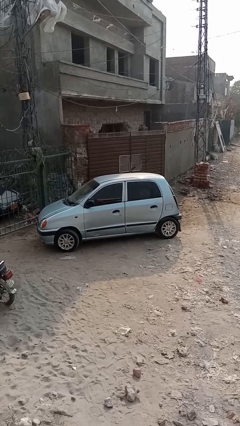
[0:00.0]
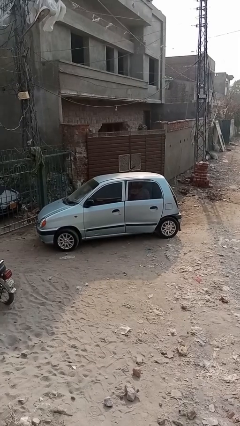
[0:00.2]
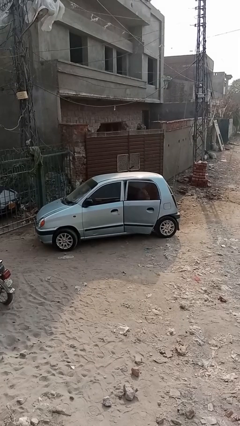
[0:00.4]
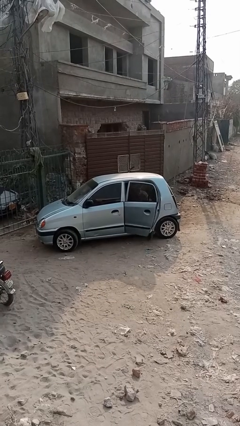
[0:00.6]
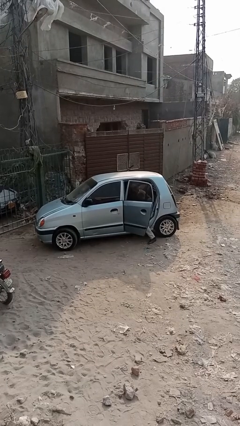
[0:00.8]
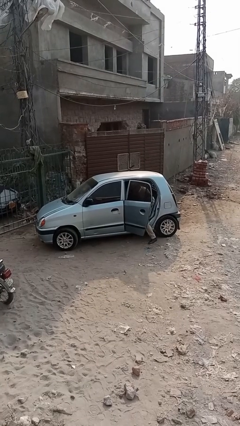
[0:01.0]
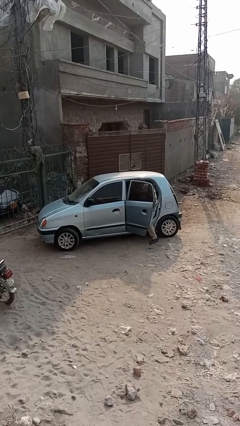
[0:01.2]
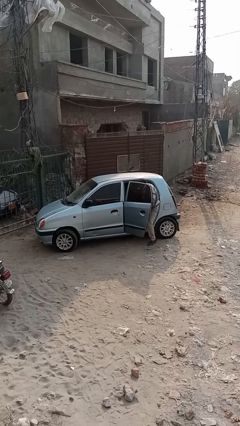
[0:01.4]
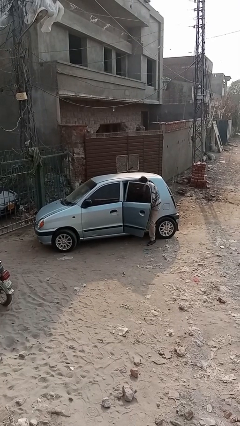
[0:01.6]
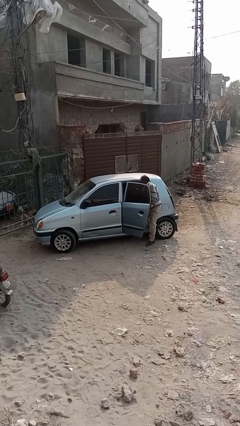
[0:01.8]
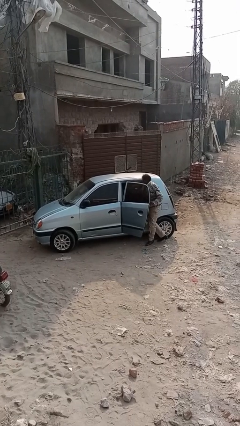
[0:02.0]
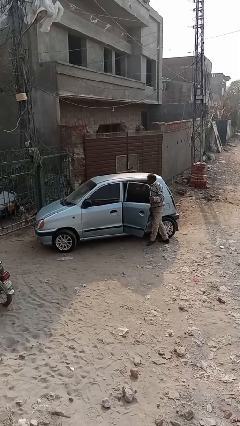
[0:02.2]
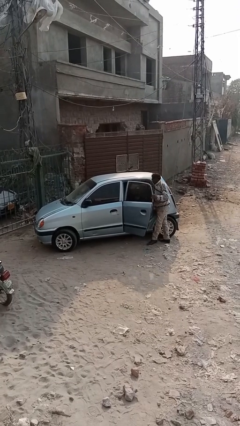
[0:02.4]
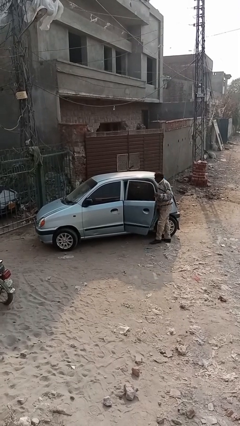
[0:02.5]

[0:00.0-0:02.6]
car drops off person

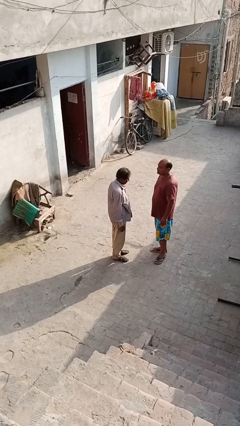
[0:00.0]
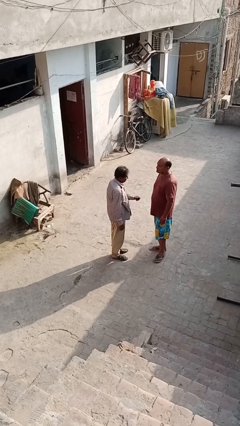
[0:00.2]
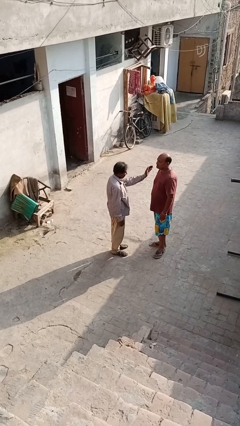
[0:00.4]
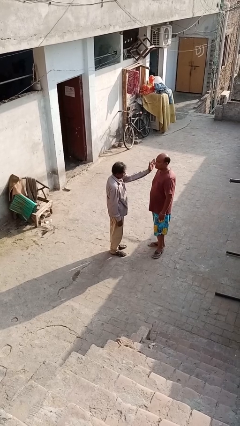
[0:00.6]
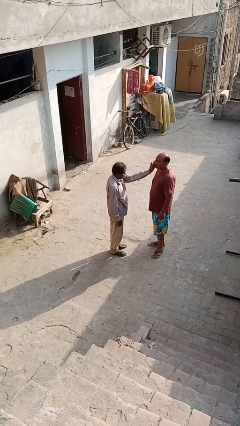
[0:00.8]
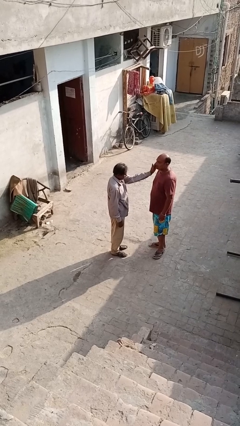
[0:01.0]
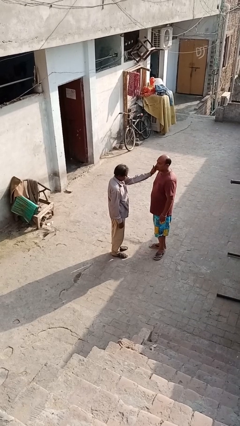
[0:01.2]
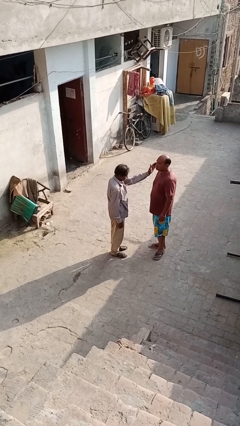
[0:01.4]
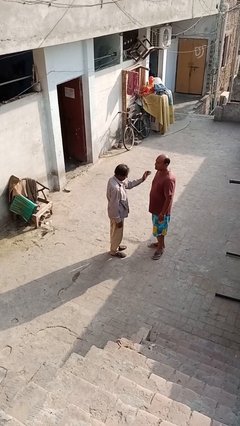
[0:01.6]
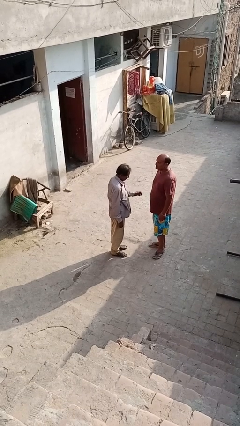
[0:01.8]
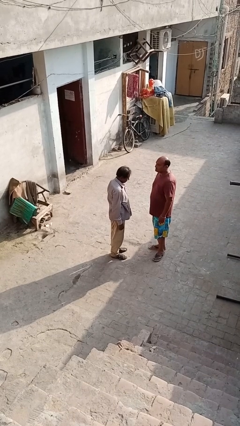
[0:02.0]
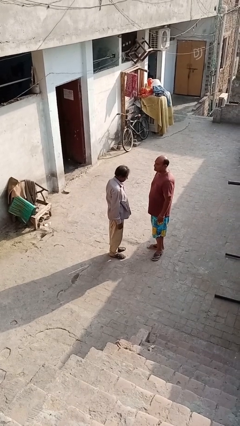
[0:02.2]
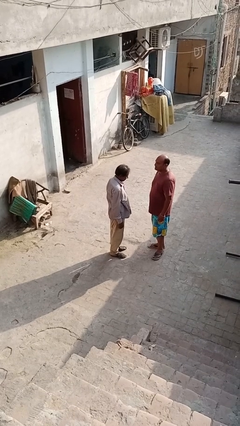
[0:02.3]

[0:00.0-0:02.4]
person touches face of person

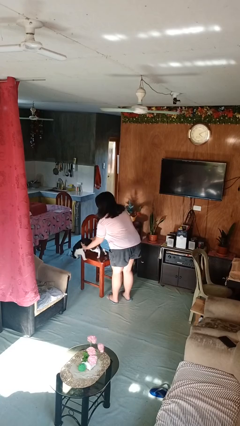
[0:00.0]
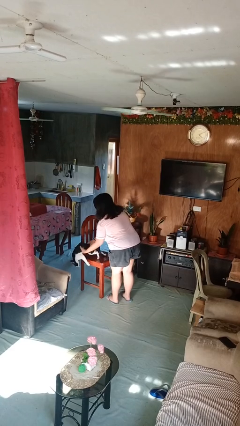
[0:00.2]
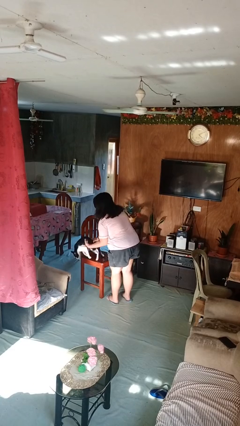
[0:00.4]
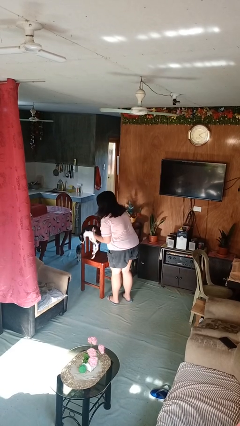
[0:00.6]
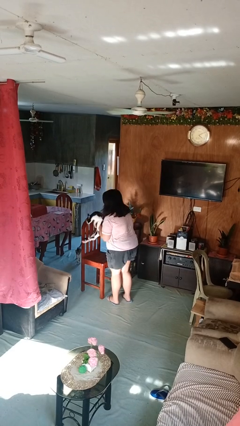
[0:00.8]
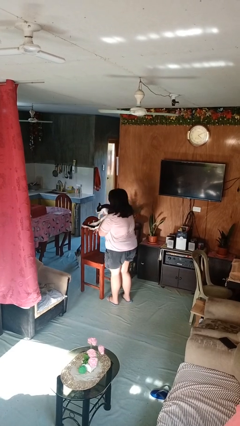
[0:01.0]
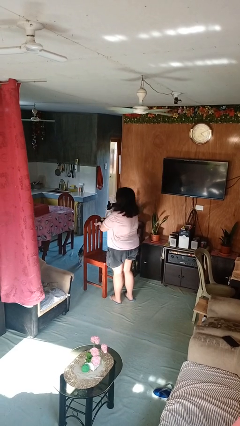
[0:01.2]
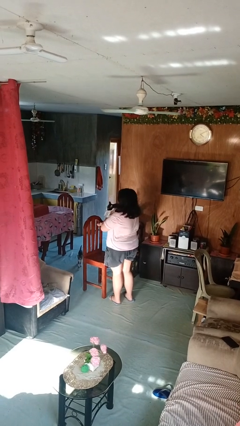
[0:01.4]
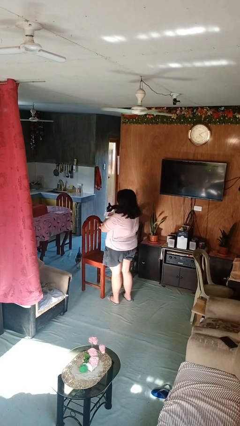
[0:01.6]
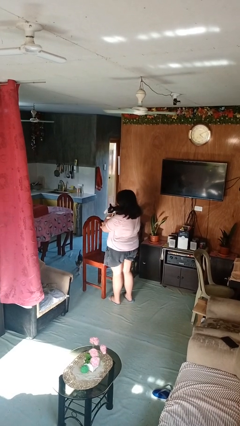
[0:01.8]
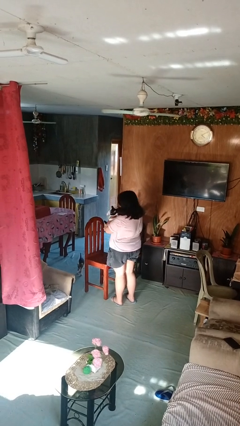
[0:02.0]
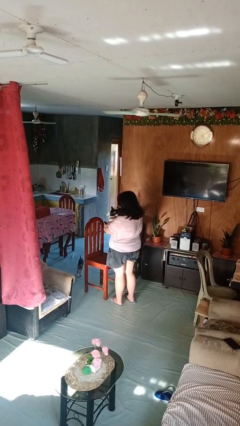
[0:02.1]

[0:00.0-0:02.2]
person hugs cat

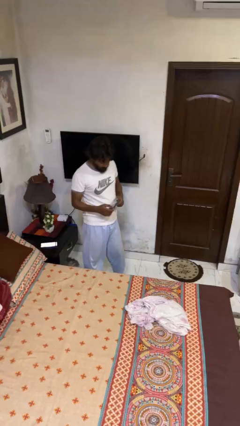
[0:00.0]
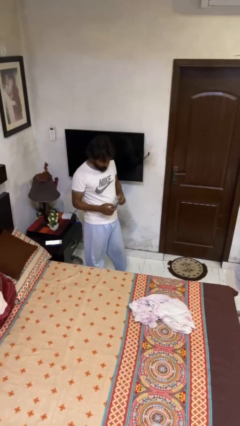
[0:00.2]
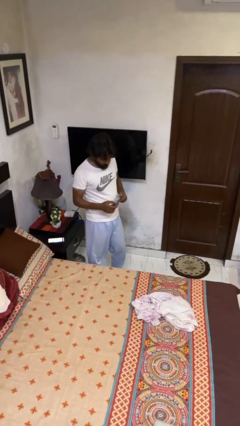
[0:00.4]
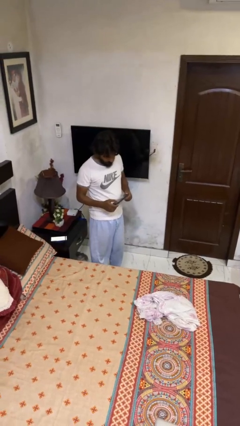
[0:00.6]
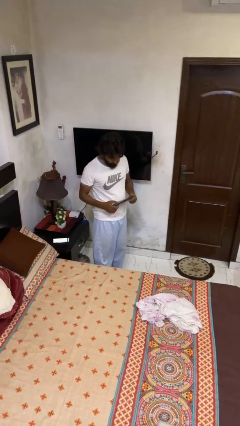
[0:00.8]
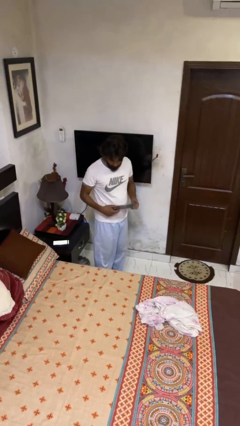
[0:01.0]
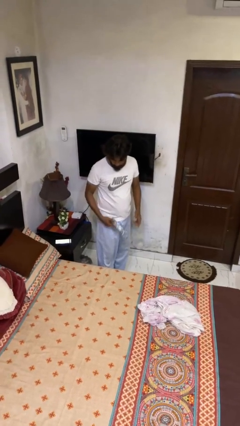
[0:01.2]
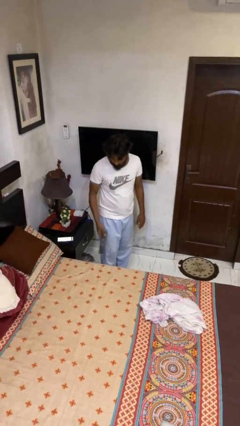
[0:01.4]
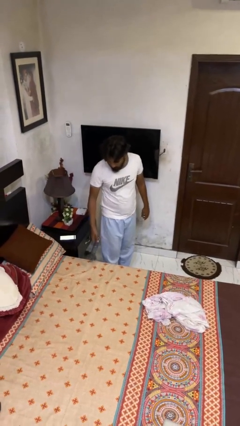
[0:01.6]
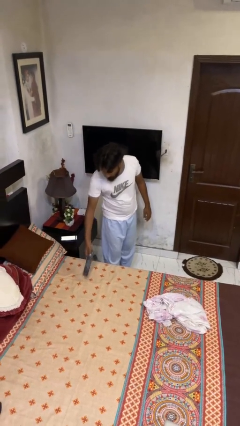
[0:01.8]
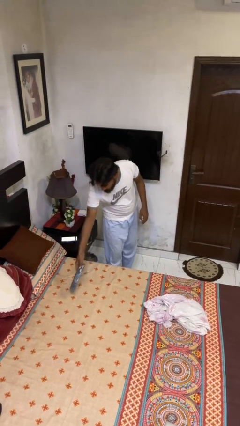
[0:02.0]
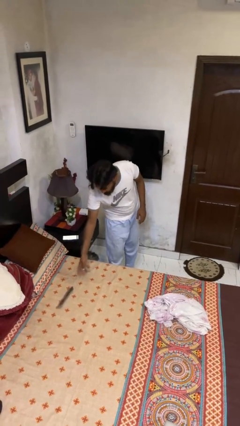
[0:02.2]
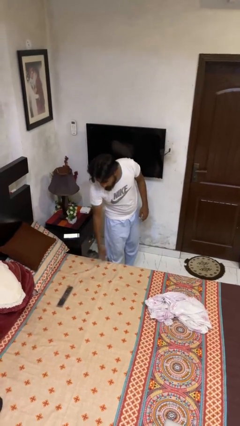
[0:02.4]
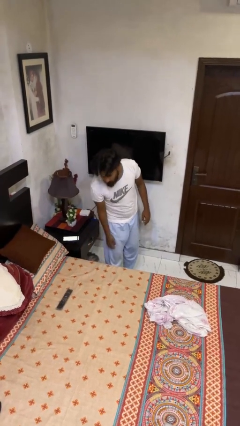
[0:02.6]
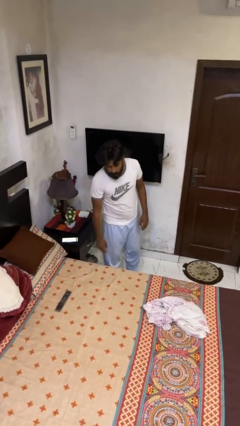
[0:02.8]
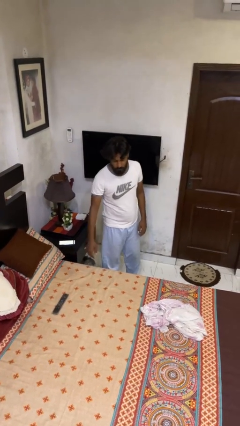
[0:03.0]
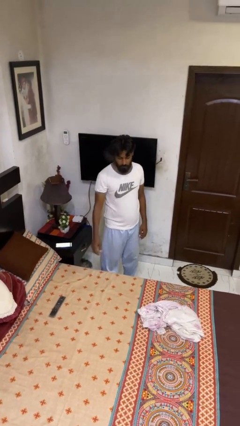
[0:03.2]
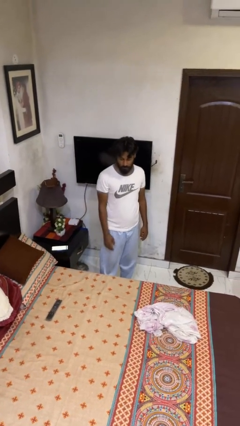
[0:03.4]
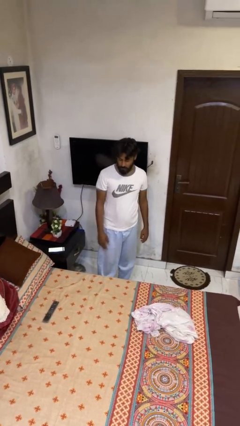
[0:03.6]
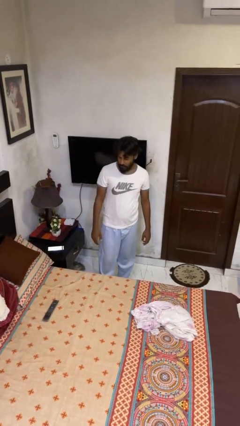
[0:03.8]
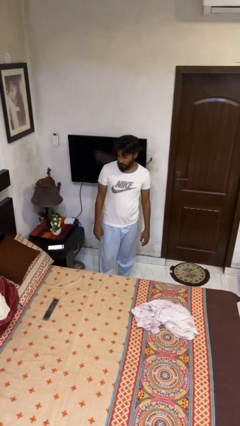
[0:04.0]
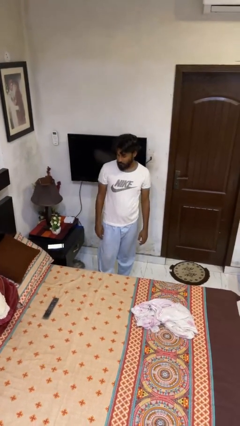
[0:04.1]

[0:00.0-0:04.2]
person puts down object on bed

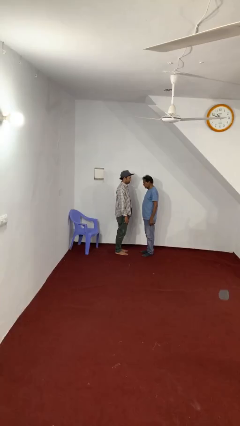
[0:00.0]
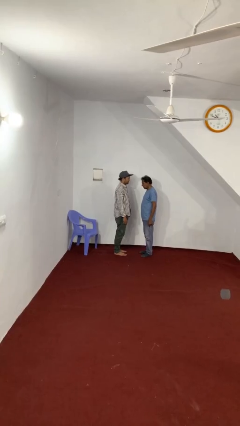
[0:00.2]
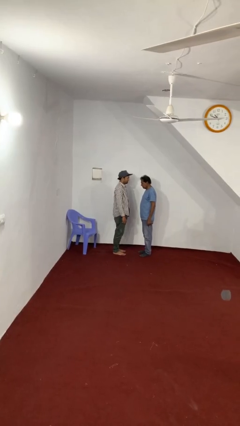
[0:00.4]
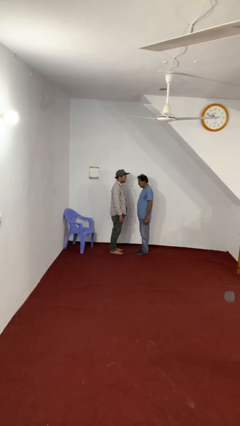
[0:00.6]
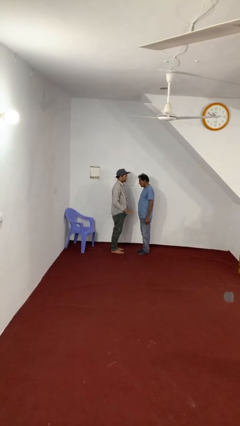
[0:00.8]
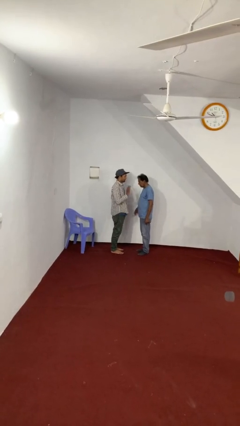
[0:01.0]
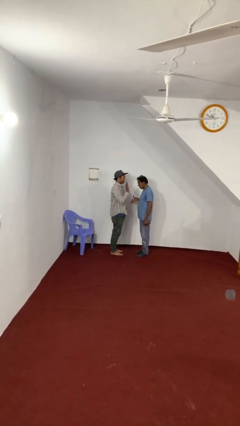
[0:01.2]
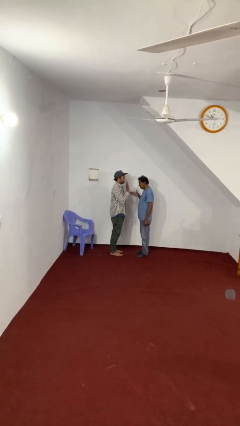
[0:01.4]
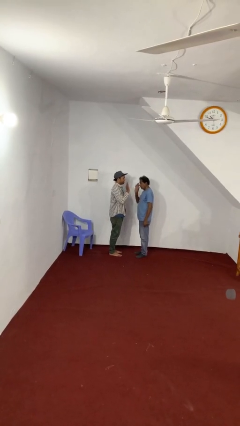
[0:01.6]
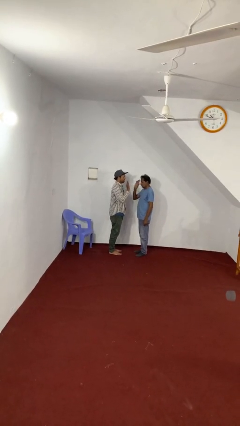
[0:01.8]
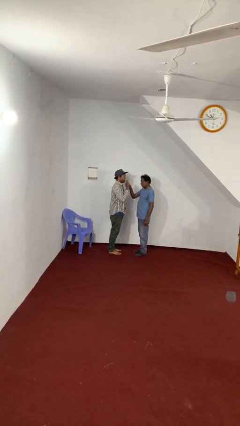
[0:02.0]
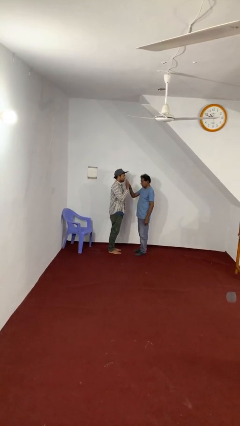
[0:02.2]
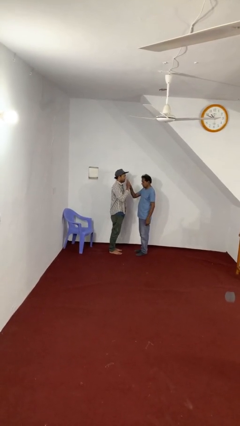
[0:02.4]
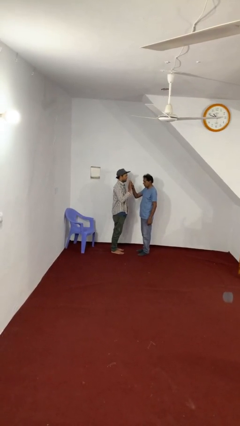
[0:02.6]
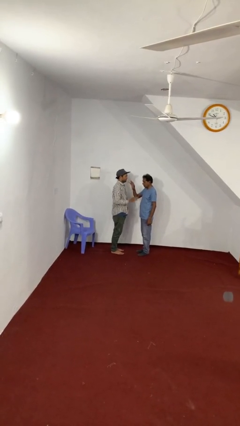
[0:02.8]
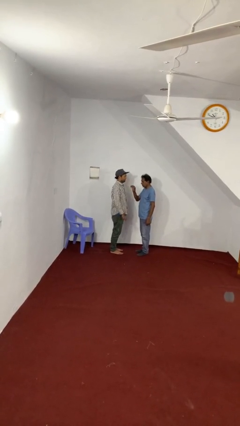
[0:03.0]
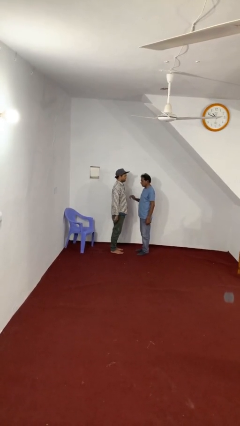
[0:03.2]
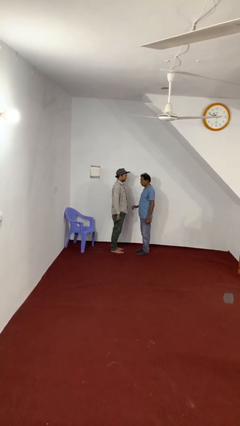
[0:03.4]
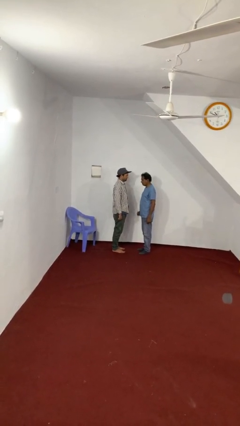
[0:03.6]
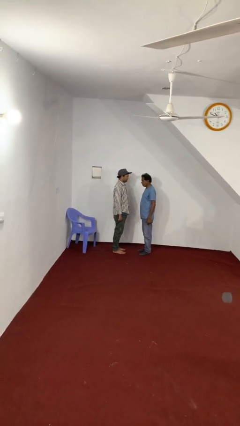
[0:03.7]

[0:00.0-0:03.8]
person highfives hand

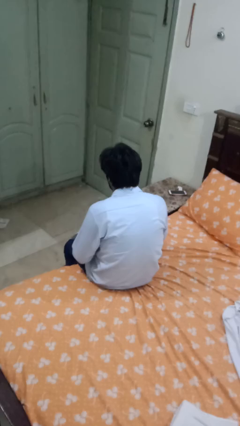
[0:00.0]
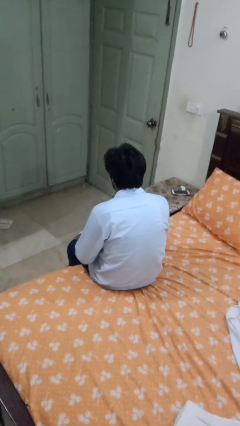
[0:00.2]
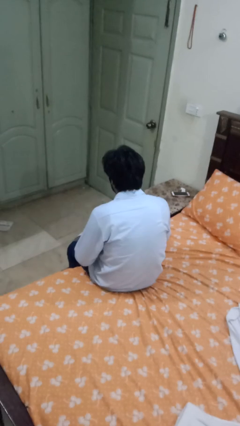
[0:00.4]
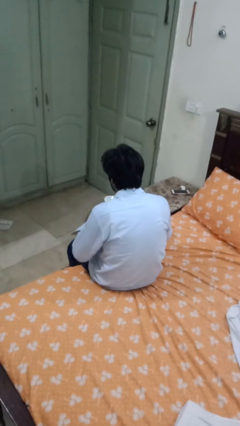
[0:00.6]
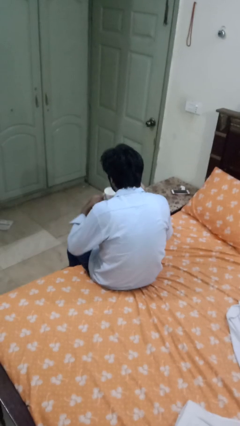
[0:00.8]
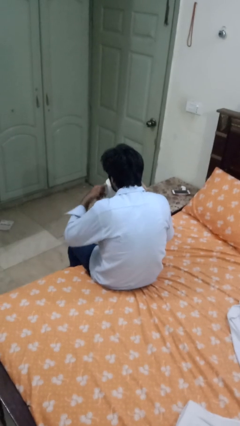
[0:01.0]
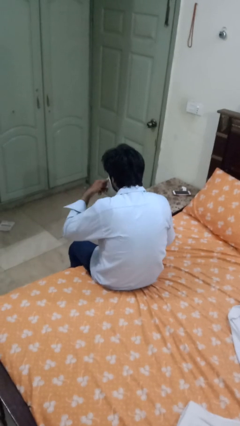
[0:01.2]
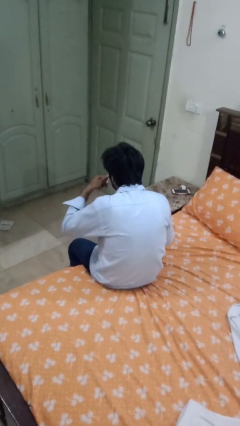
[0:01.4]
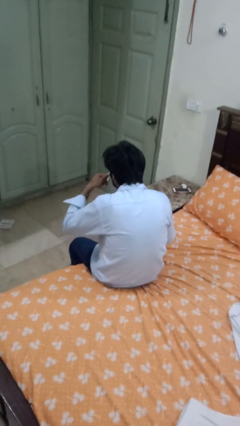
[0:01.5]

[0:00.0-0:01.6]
person drinks from mug

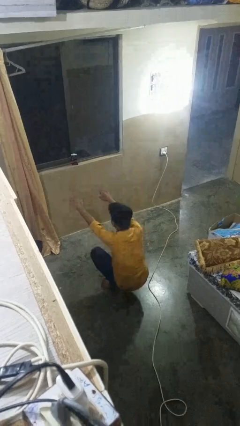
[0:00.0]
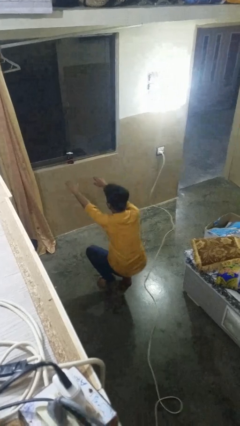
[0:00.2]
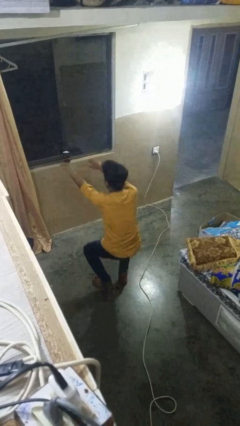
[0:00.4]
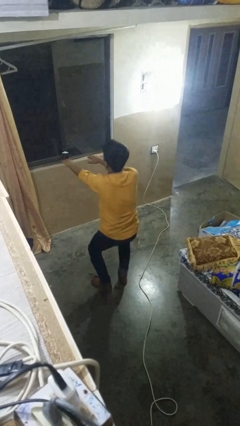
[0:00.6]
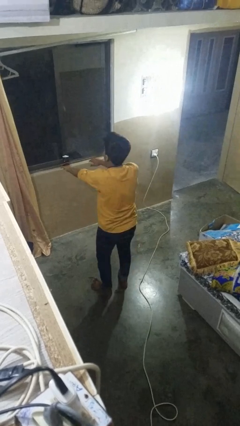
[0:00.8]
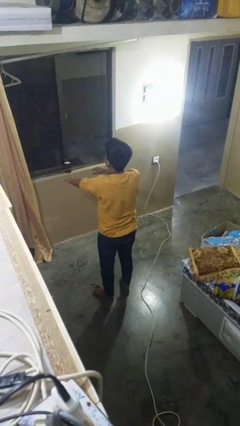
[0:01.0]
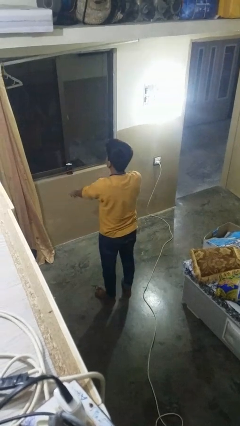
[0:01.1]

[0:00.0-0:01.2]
person stands up
